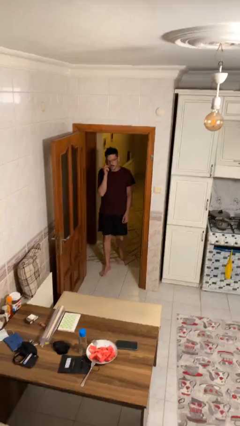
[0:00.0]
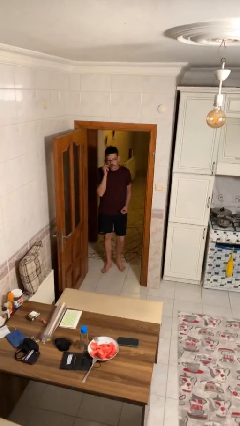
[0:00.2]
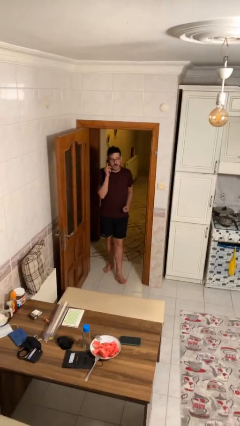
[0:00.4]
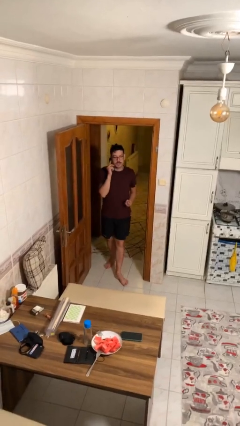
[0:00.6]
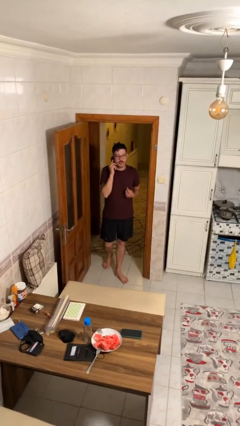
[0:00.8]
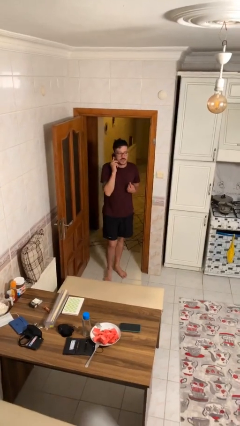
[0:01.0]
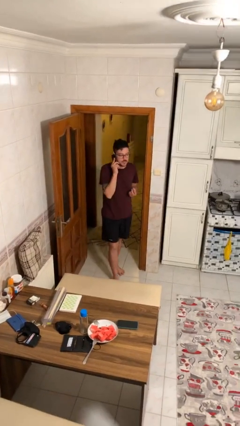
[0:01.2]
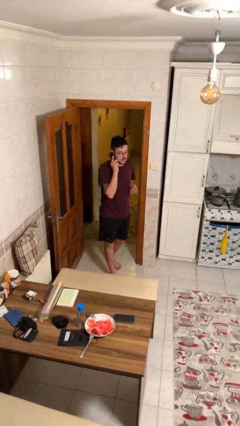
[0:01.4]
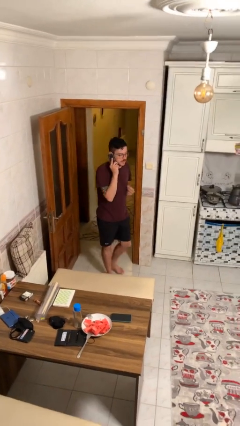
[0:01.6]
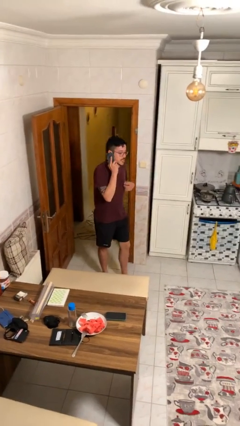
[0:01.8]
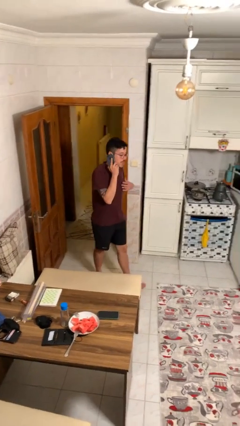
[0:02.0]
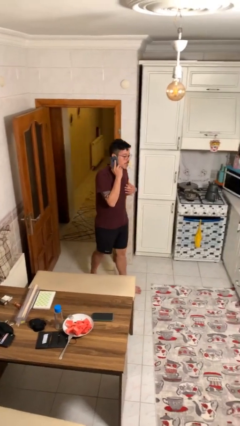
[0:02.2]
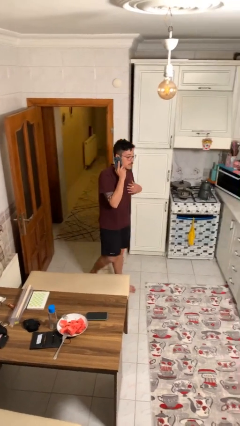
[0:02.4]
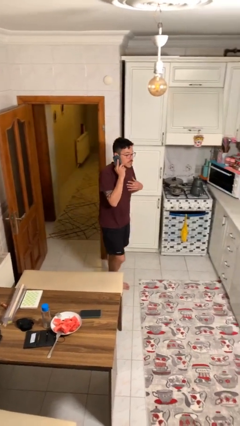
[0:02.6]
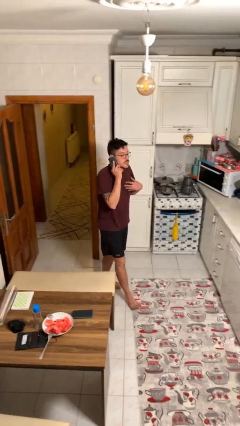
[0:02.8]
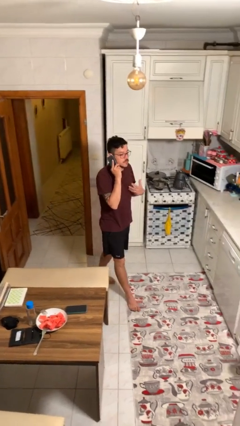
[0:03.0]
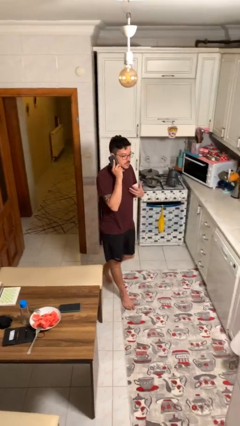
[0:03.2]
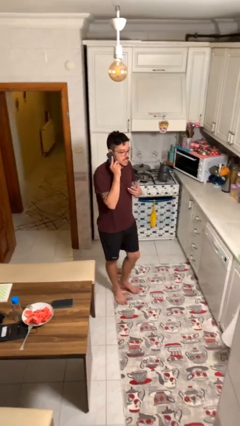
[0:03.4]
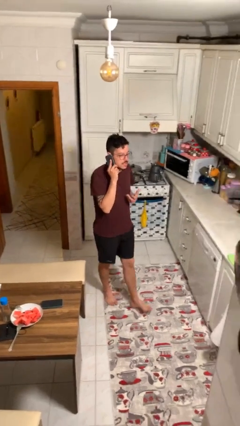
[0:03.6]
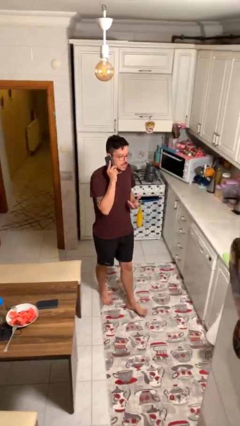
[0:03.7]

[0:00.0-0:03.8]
person enters scene through structure

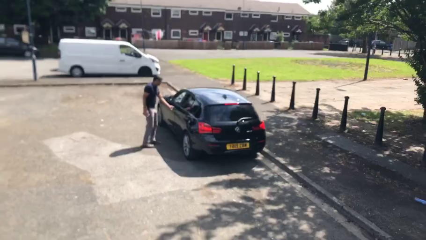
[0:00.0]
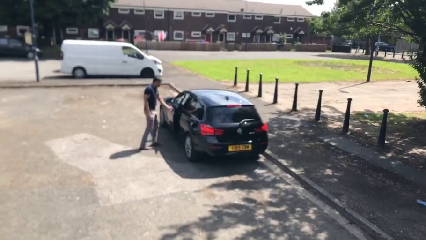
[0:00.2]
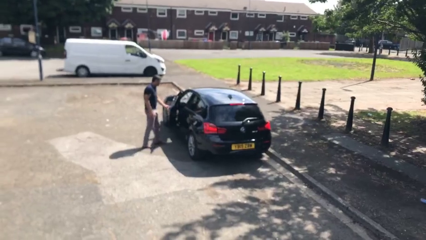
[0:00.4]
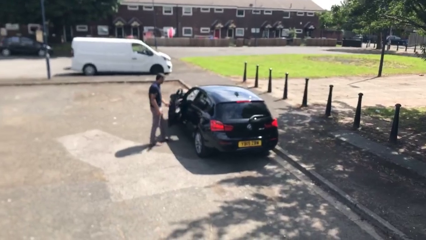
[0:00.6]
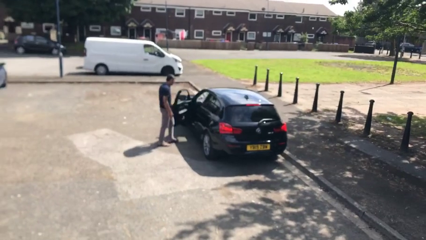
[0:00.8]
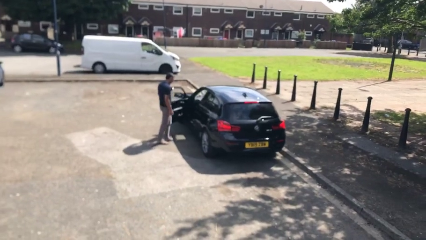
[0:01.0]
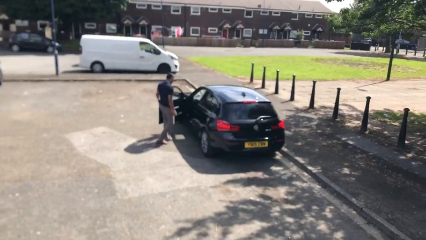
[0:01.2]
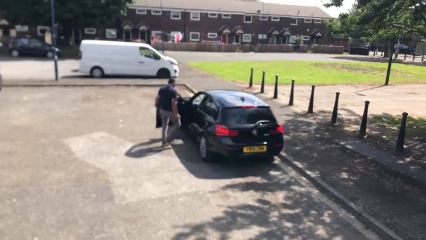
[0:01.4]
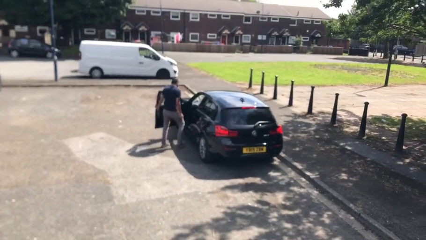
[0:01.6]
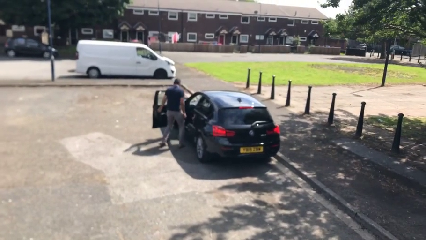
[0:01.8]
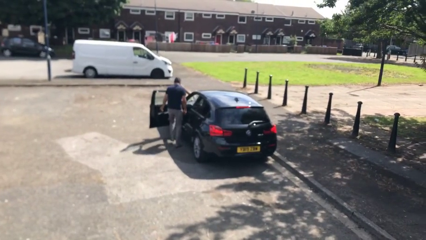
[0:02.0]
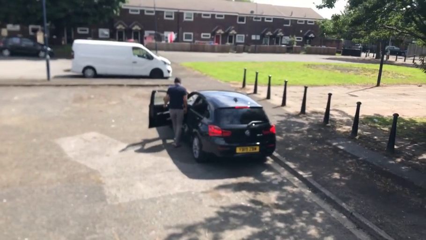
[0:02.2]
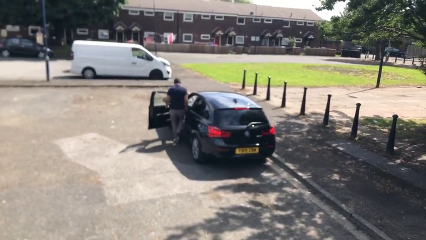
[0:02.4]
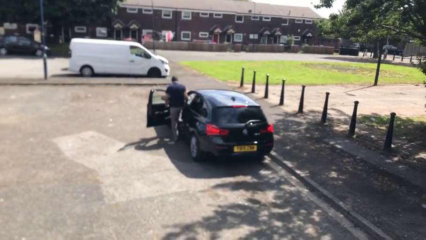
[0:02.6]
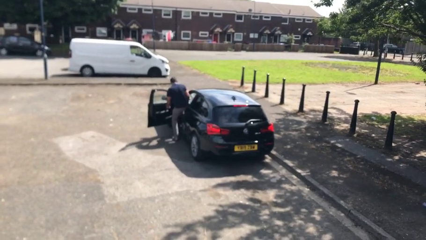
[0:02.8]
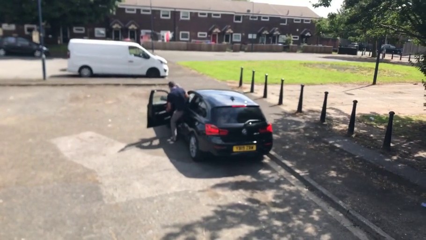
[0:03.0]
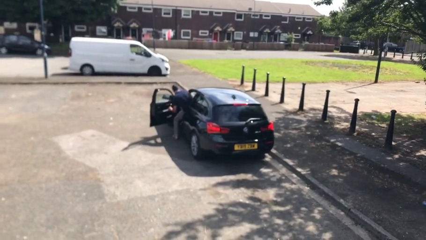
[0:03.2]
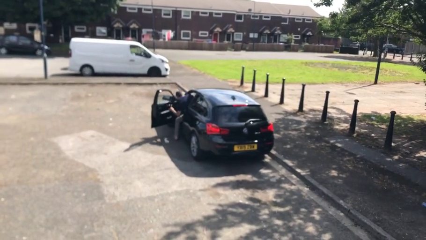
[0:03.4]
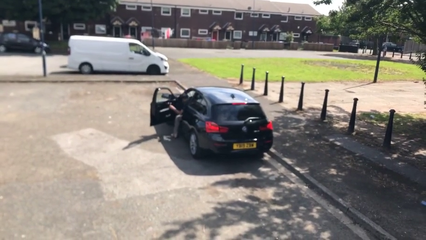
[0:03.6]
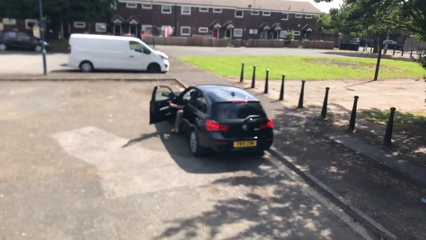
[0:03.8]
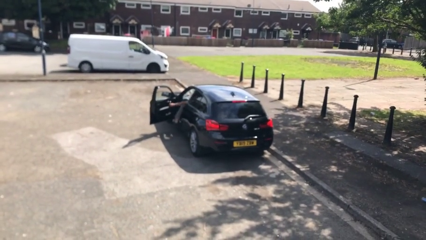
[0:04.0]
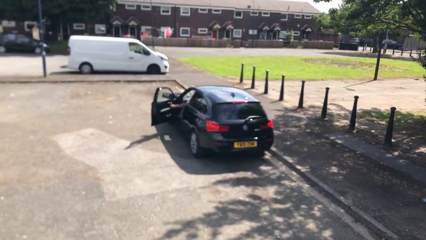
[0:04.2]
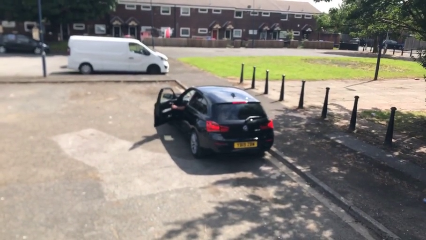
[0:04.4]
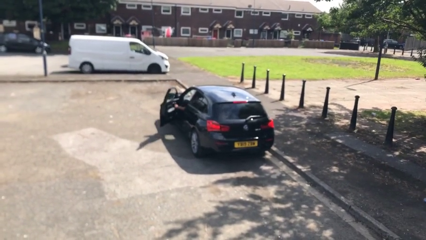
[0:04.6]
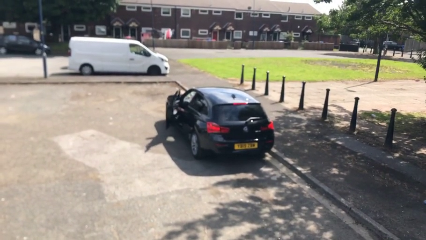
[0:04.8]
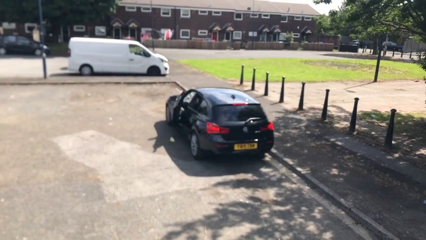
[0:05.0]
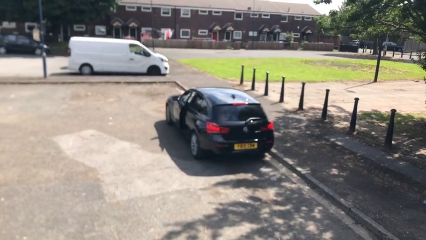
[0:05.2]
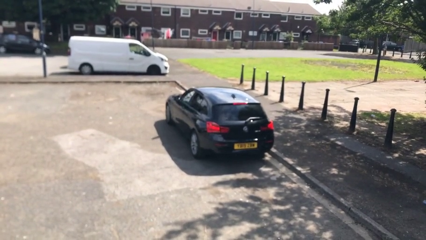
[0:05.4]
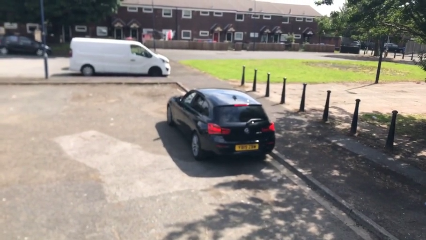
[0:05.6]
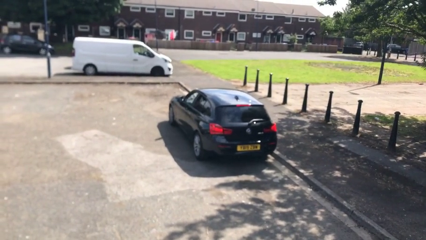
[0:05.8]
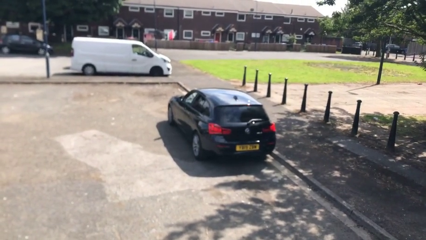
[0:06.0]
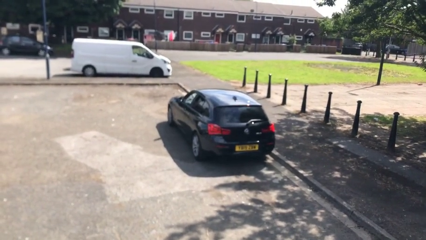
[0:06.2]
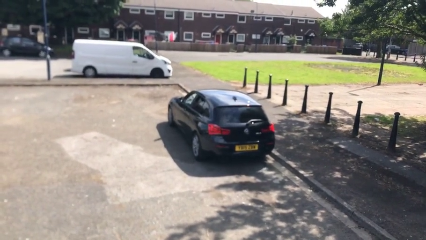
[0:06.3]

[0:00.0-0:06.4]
car picks up person

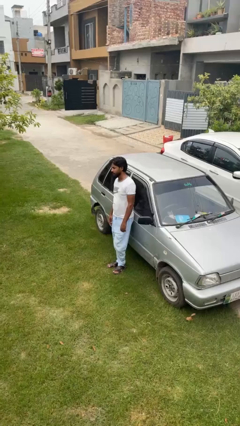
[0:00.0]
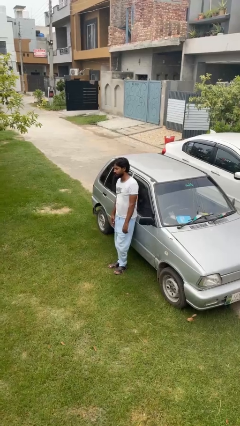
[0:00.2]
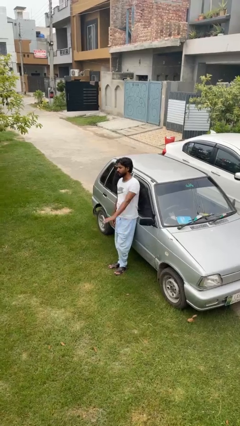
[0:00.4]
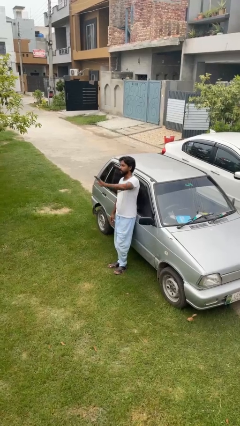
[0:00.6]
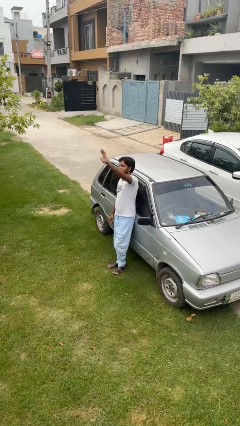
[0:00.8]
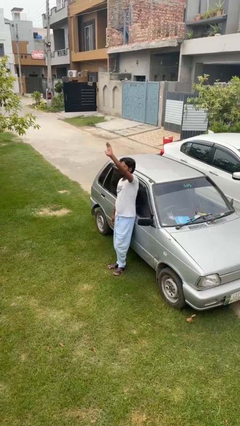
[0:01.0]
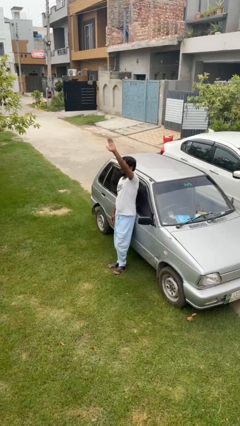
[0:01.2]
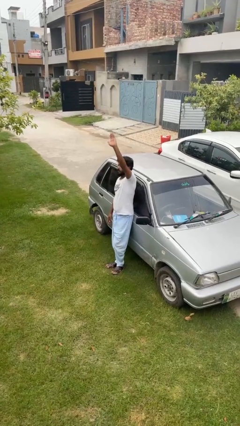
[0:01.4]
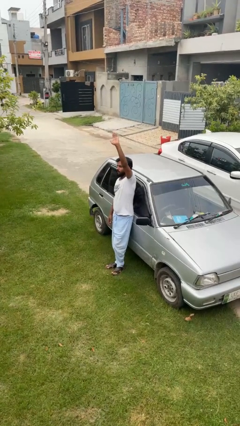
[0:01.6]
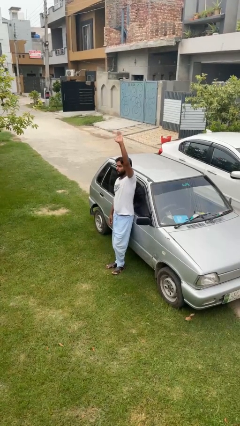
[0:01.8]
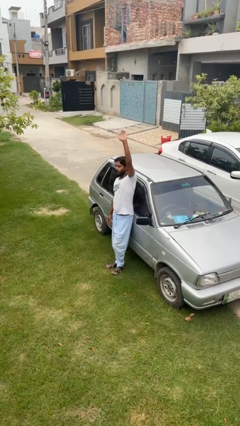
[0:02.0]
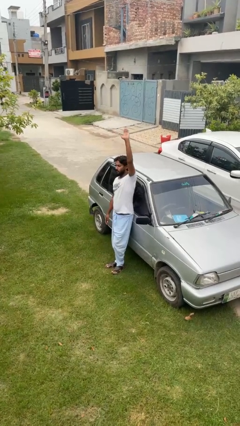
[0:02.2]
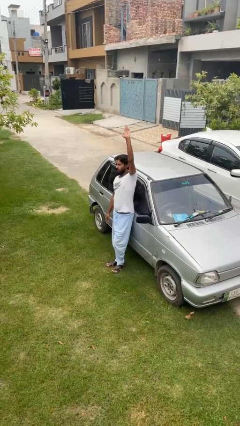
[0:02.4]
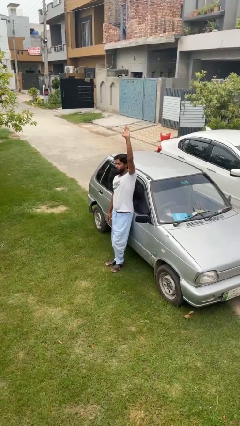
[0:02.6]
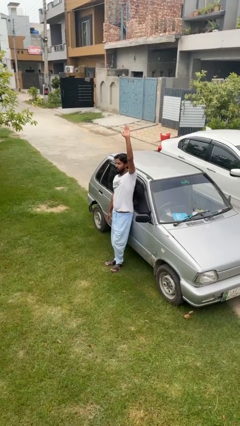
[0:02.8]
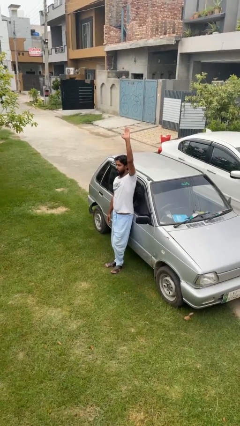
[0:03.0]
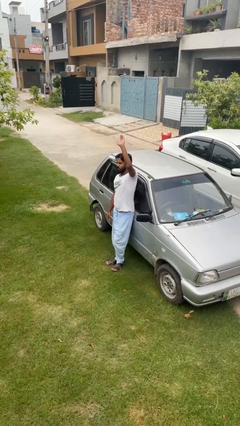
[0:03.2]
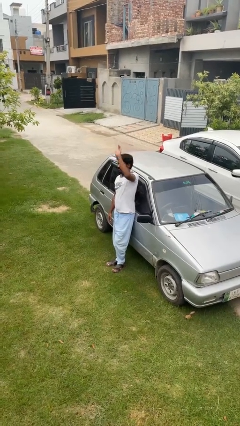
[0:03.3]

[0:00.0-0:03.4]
person gestures raise hand

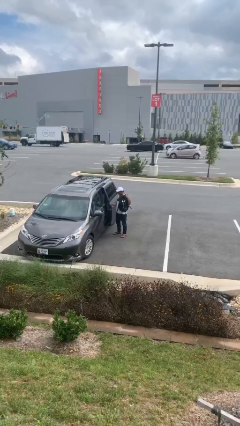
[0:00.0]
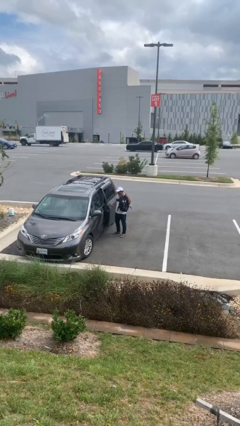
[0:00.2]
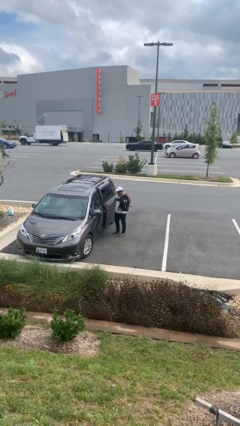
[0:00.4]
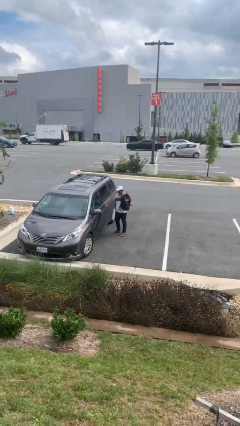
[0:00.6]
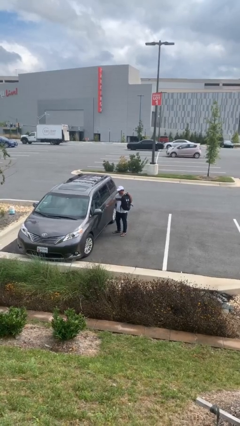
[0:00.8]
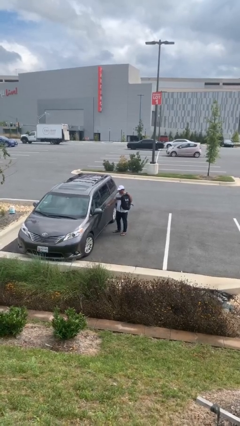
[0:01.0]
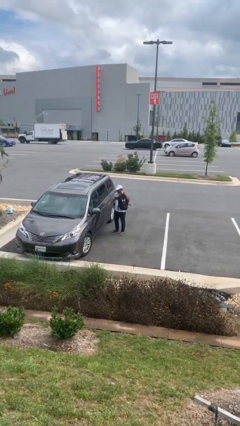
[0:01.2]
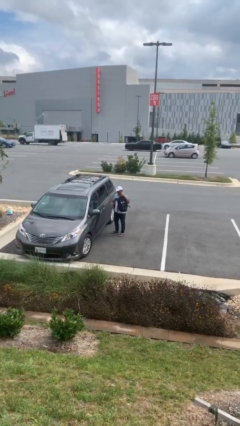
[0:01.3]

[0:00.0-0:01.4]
person closes car door

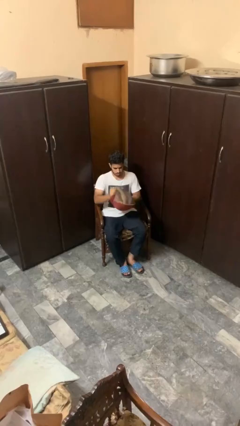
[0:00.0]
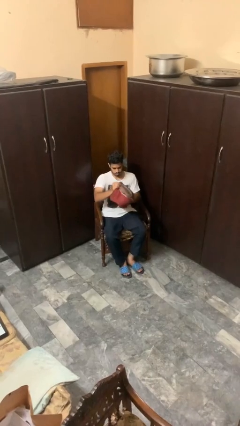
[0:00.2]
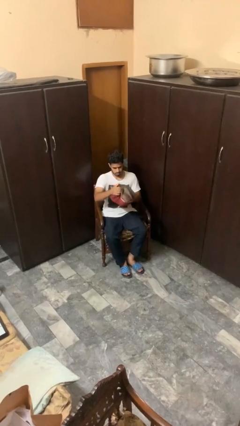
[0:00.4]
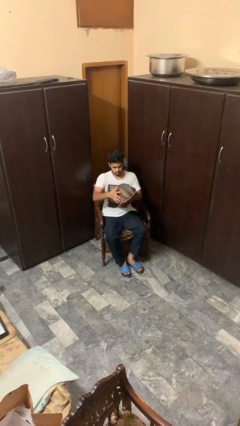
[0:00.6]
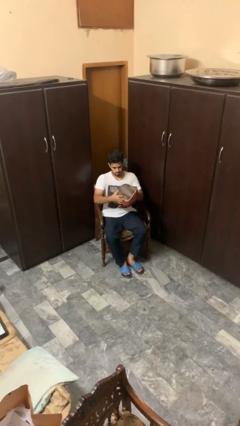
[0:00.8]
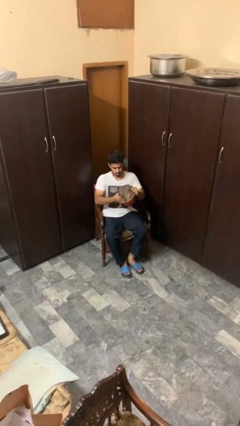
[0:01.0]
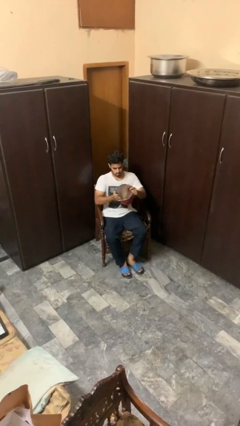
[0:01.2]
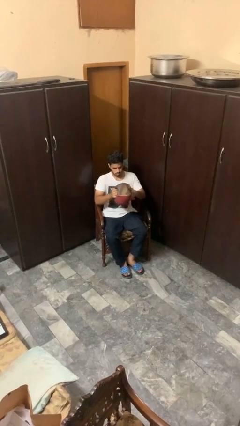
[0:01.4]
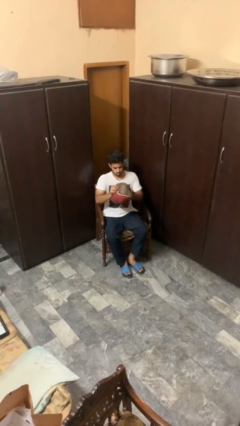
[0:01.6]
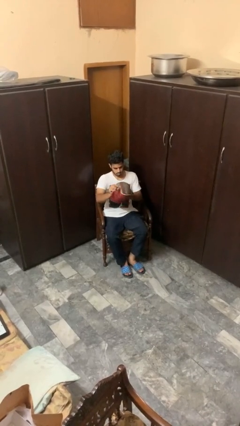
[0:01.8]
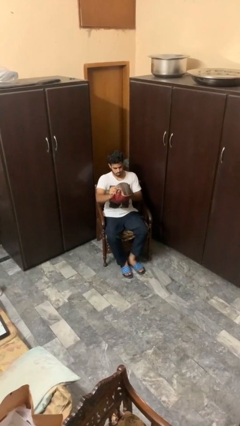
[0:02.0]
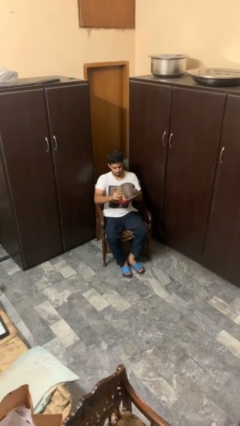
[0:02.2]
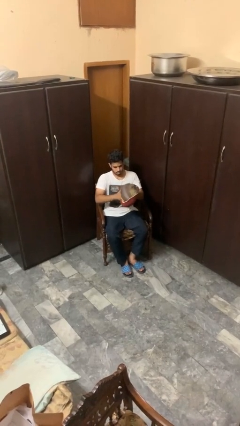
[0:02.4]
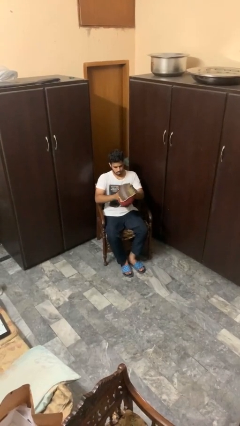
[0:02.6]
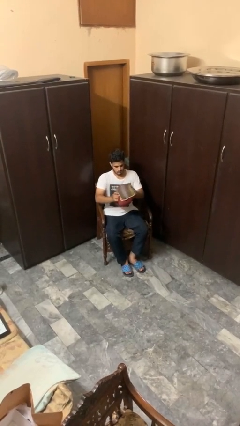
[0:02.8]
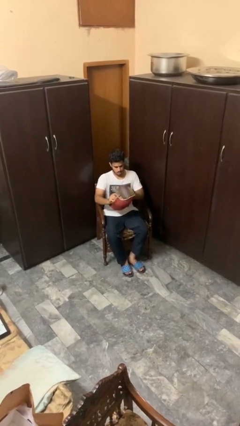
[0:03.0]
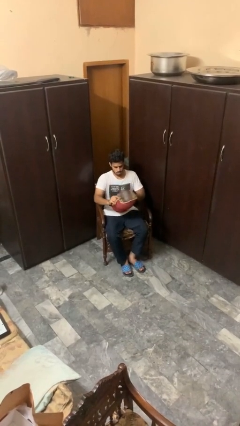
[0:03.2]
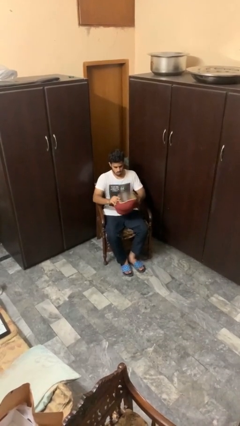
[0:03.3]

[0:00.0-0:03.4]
person squeezes object
